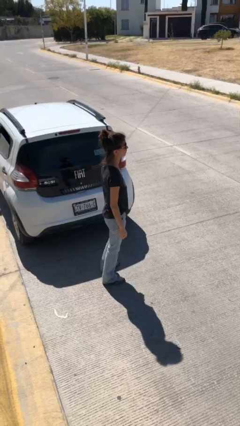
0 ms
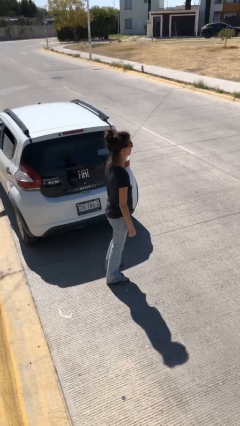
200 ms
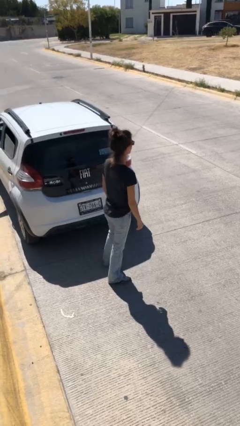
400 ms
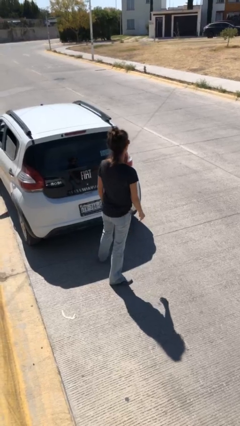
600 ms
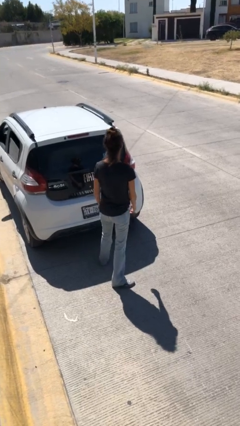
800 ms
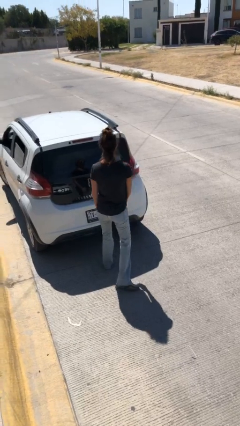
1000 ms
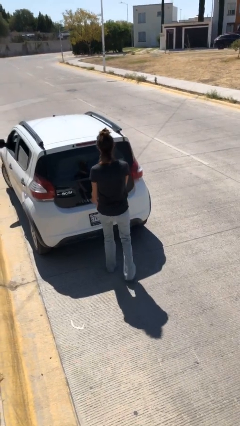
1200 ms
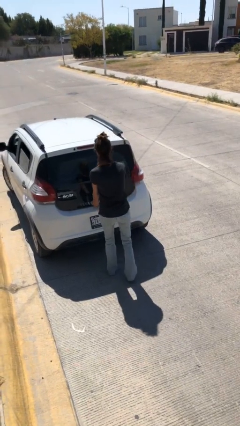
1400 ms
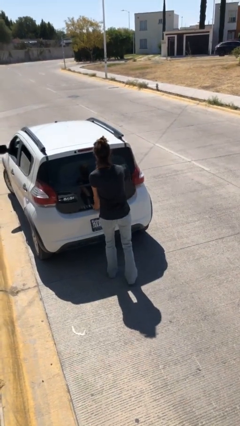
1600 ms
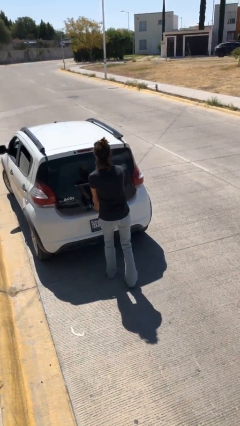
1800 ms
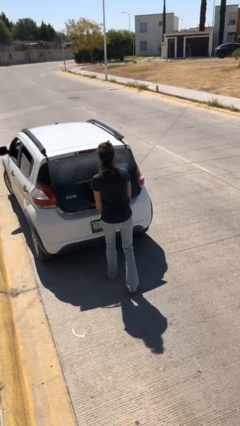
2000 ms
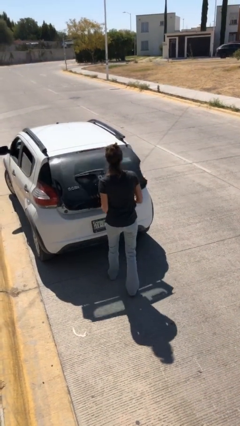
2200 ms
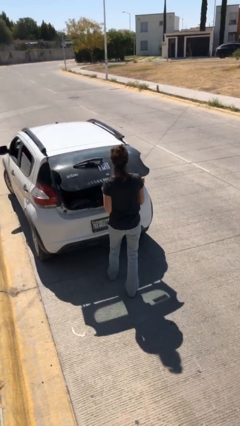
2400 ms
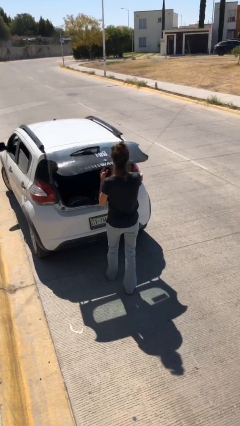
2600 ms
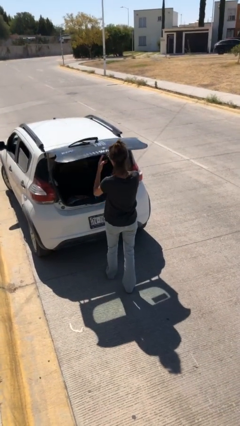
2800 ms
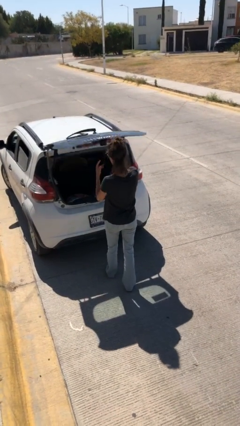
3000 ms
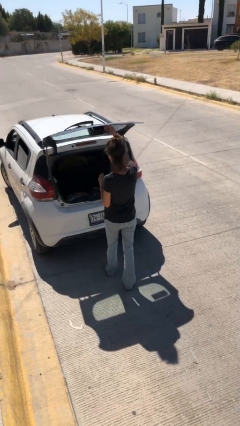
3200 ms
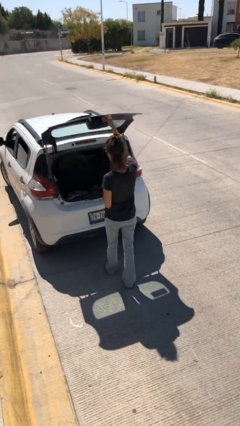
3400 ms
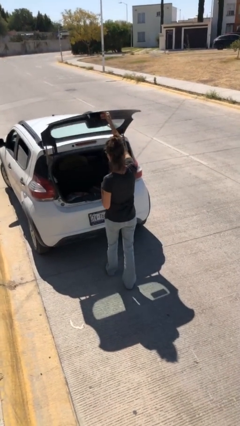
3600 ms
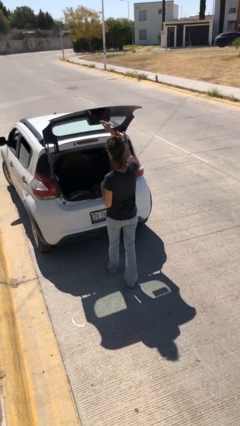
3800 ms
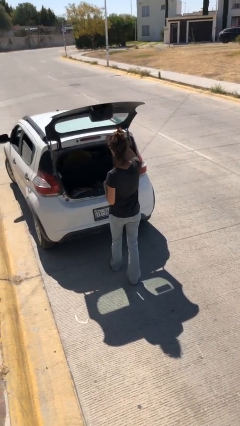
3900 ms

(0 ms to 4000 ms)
person opens car trunk

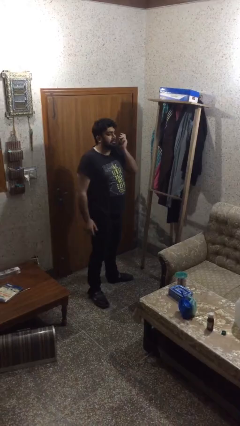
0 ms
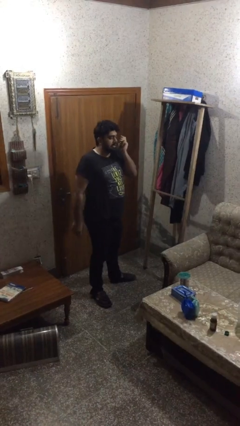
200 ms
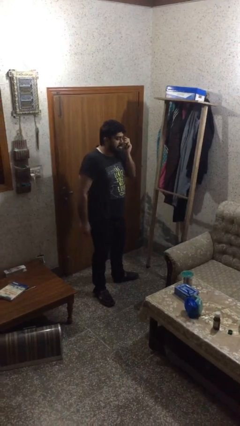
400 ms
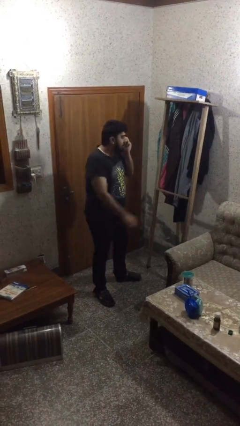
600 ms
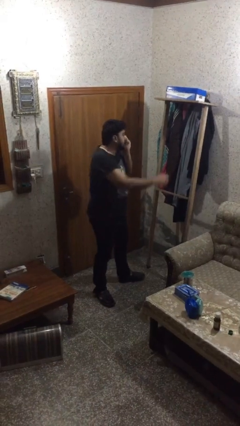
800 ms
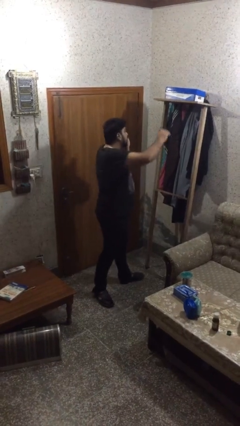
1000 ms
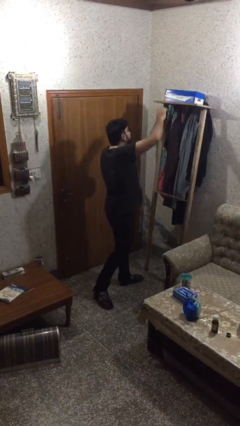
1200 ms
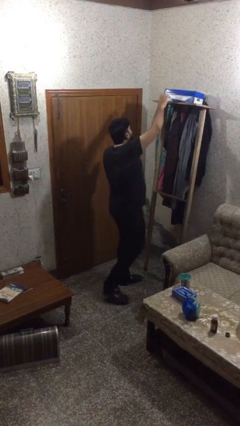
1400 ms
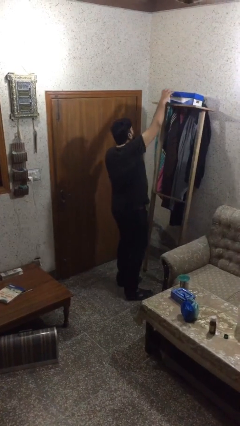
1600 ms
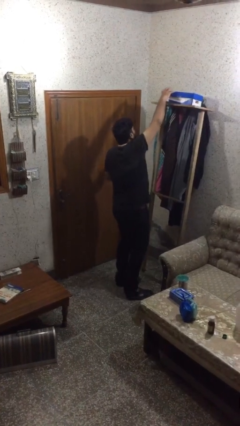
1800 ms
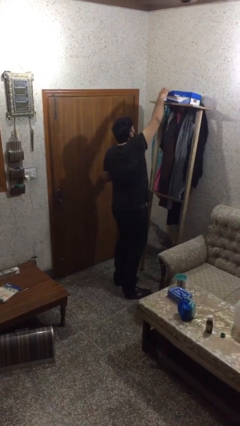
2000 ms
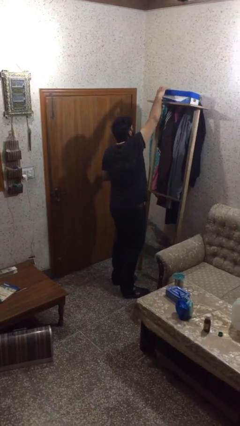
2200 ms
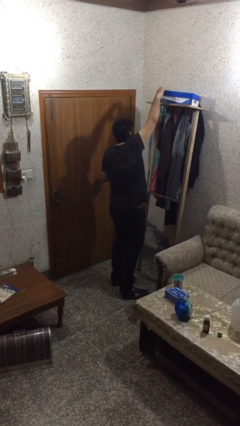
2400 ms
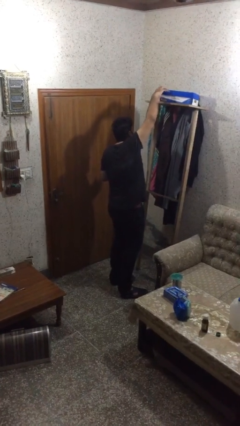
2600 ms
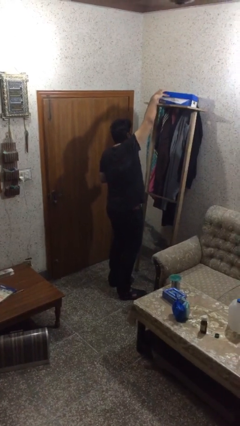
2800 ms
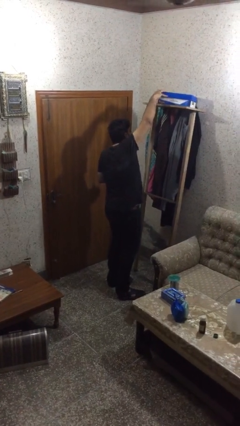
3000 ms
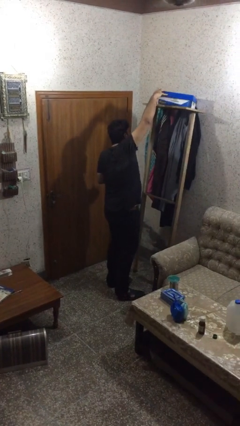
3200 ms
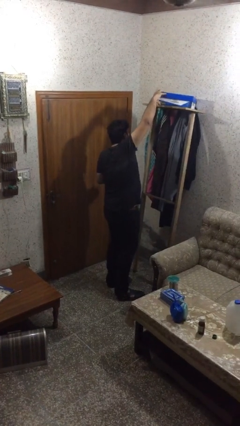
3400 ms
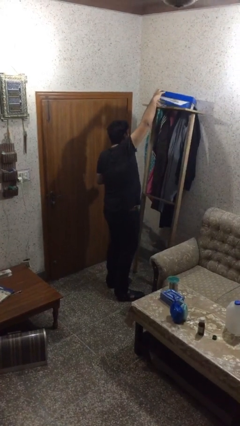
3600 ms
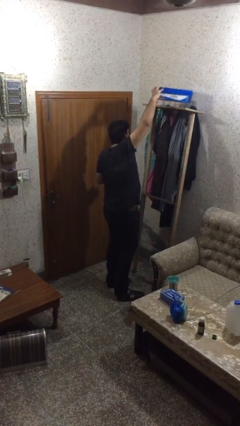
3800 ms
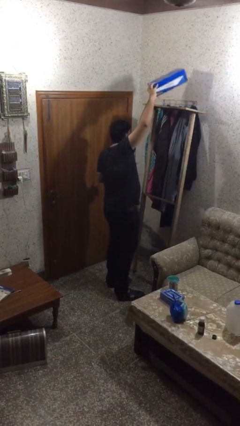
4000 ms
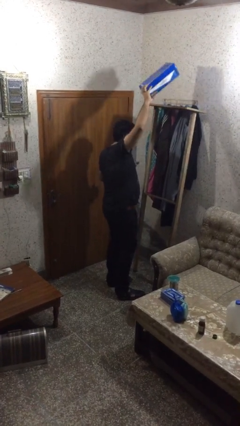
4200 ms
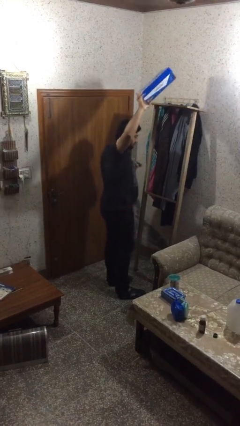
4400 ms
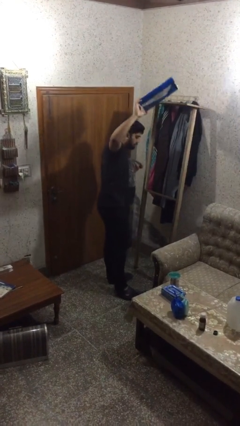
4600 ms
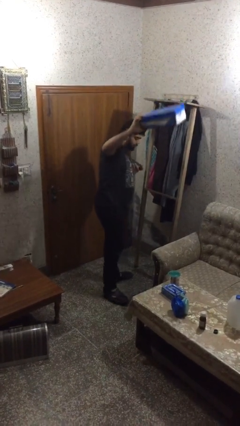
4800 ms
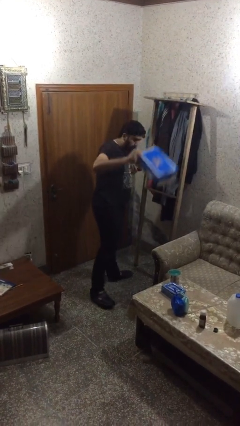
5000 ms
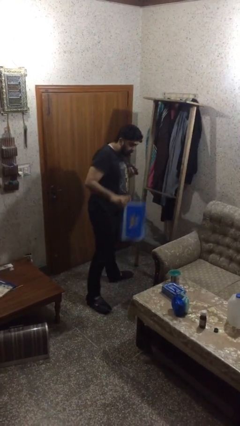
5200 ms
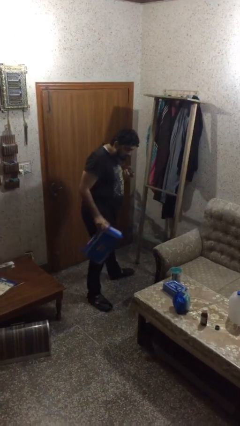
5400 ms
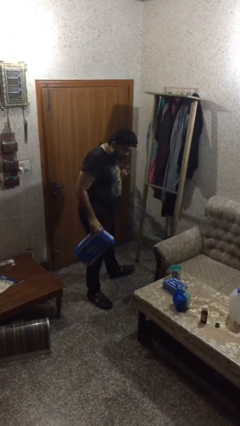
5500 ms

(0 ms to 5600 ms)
person picks up object from shelf

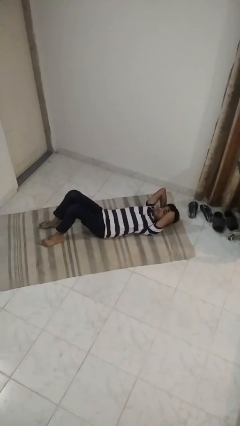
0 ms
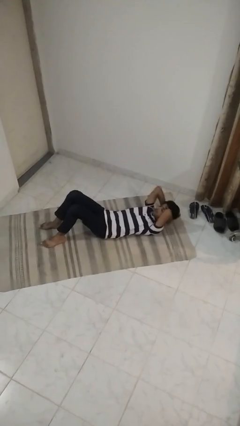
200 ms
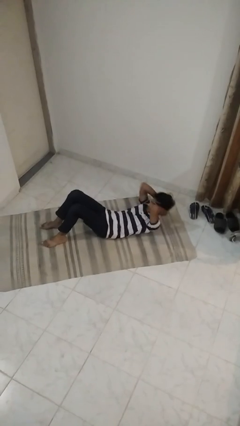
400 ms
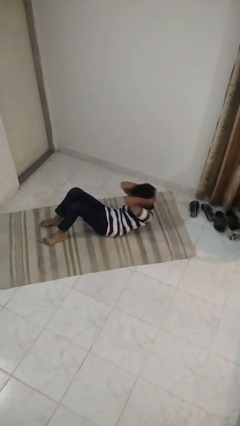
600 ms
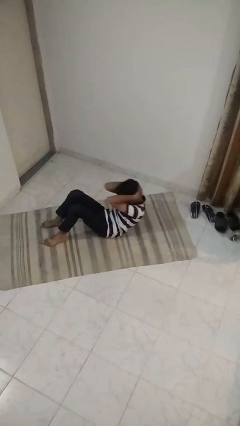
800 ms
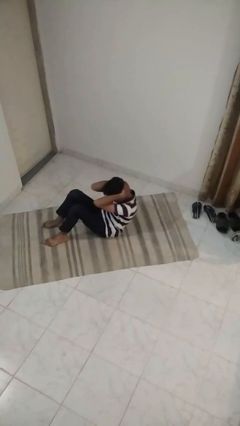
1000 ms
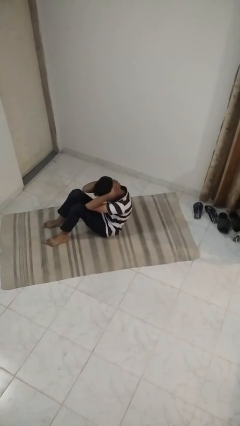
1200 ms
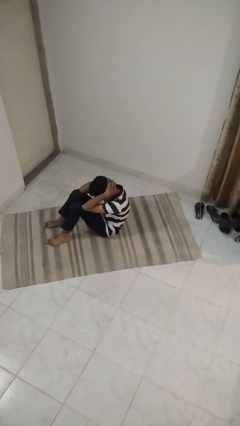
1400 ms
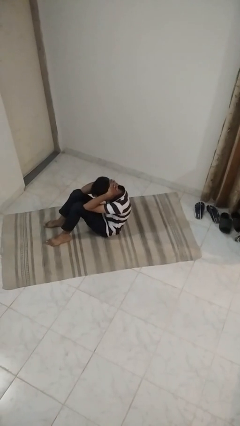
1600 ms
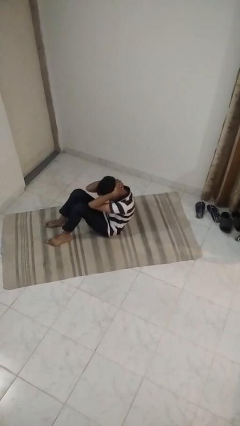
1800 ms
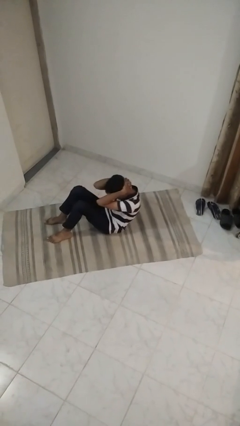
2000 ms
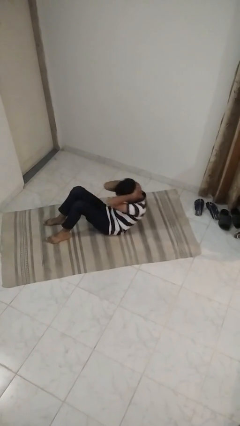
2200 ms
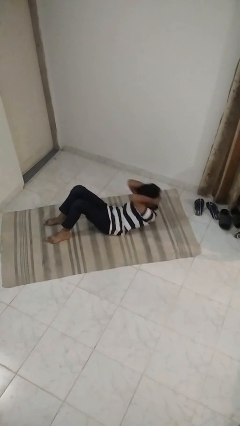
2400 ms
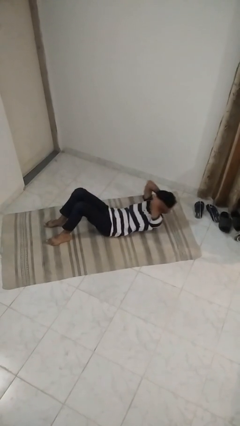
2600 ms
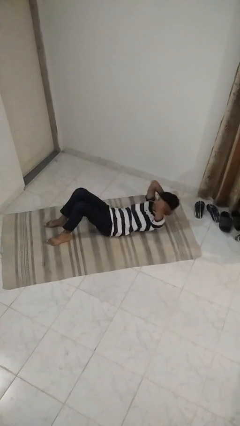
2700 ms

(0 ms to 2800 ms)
person exercises with situp

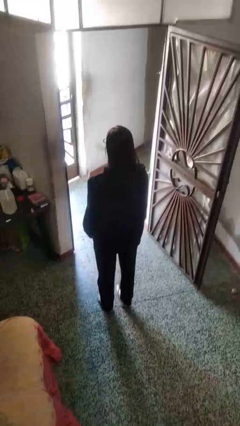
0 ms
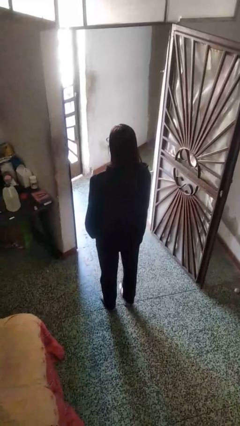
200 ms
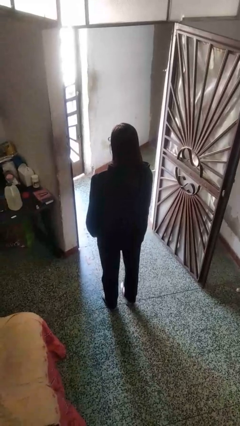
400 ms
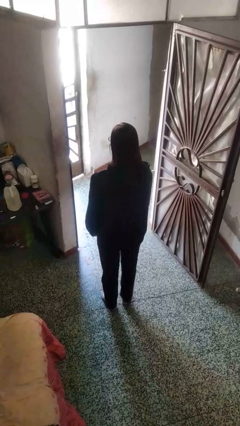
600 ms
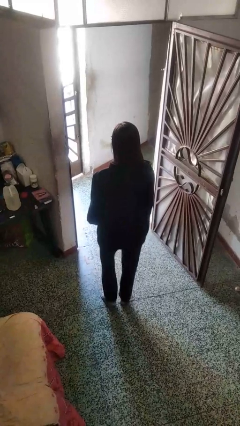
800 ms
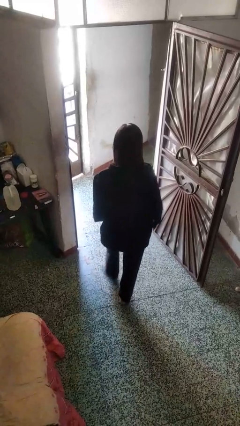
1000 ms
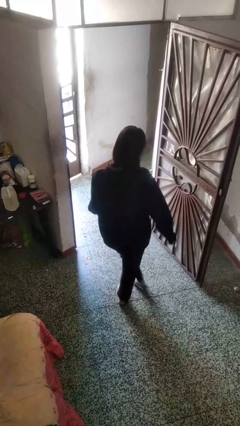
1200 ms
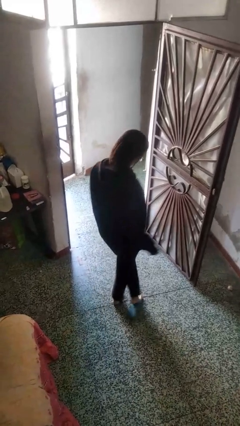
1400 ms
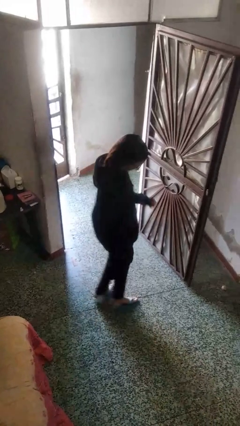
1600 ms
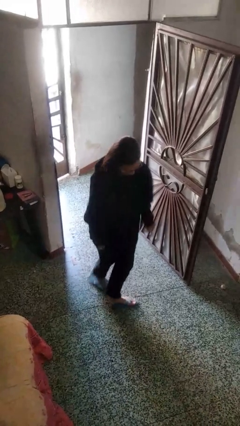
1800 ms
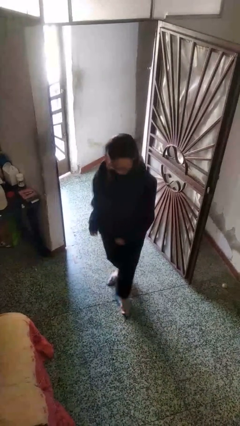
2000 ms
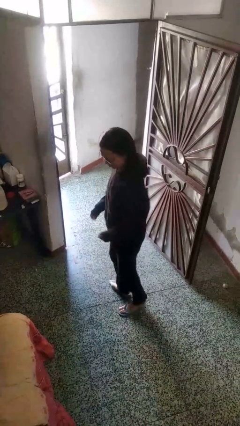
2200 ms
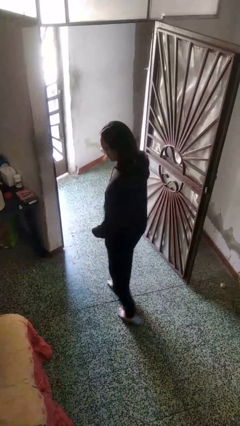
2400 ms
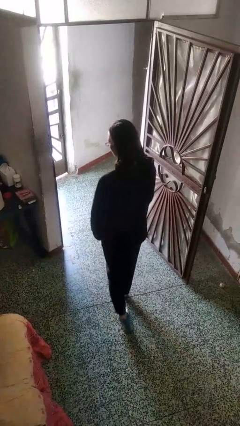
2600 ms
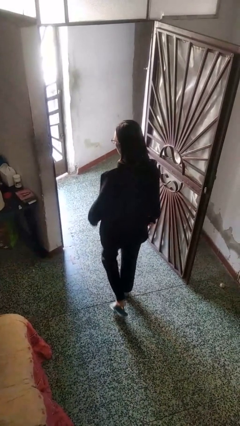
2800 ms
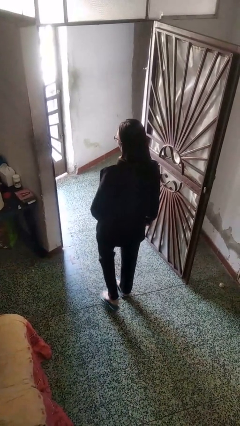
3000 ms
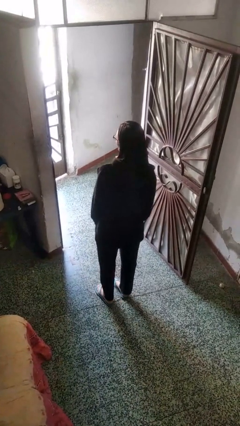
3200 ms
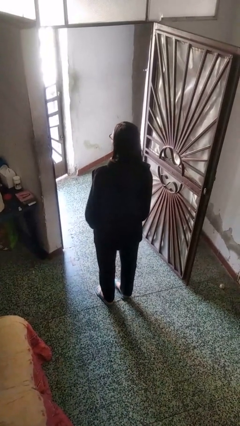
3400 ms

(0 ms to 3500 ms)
person twirls

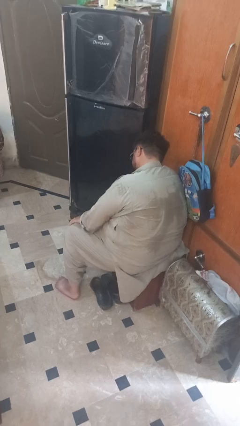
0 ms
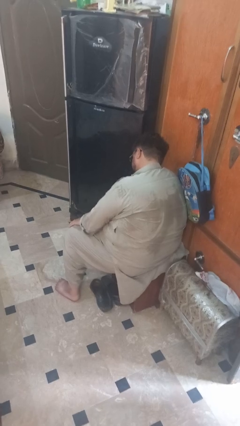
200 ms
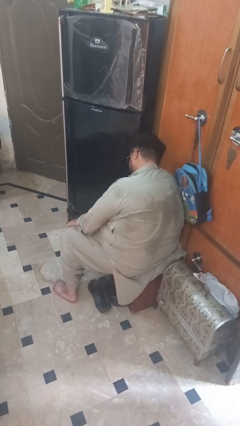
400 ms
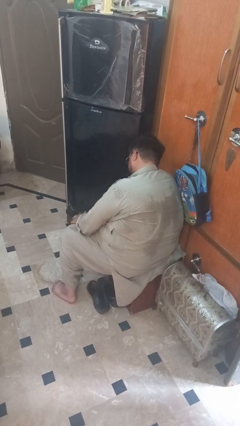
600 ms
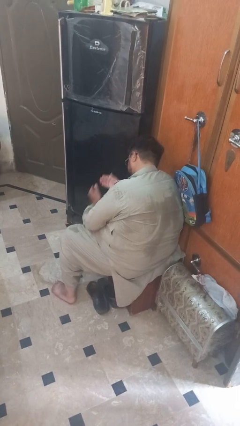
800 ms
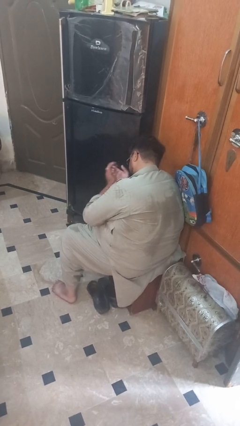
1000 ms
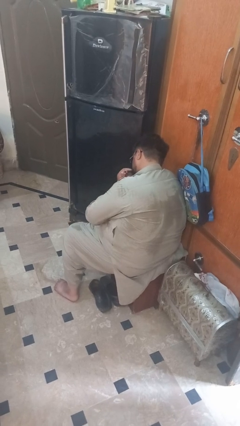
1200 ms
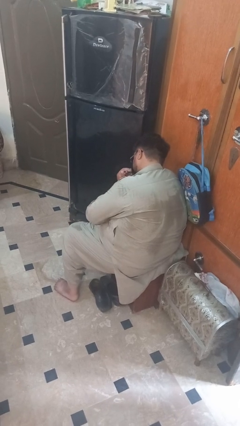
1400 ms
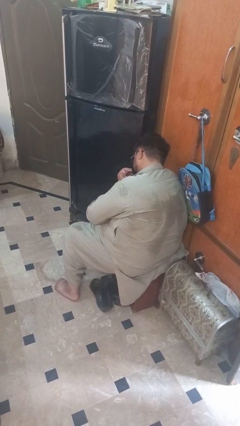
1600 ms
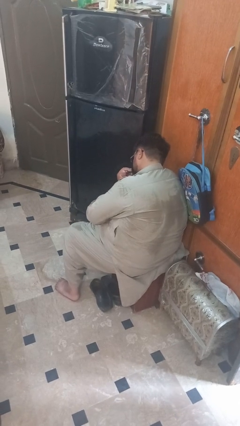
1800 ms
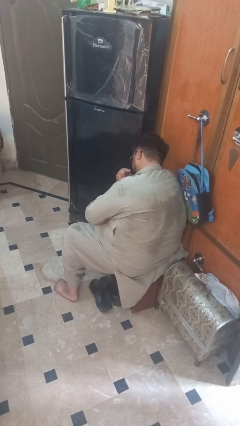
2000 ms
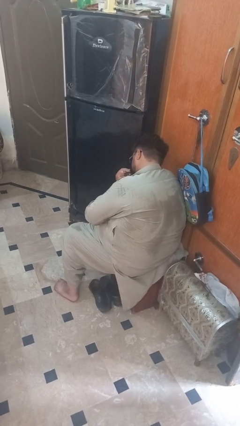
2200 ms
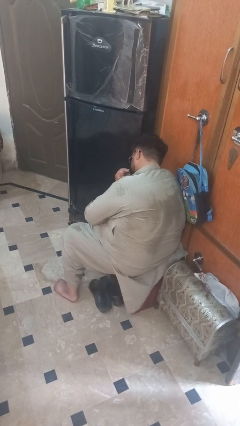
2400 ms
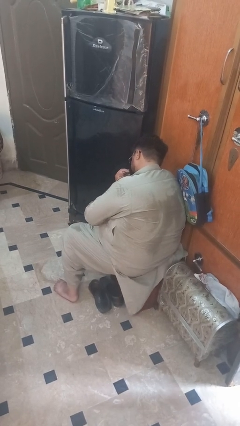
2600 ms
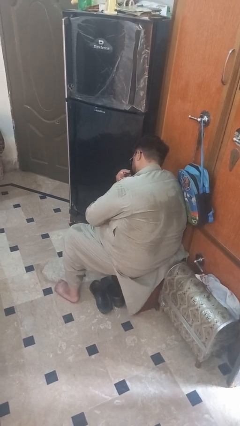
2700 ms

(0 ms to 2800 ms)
person prays
